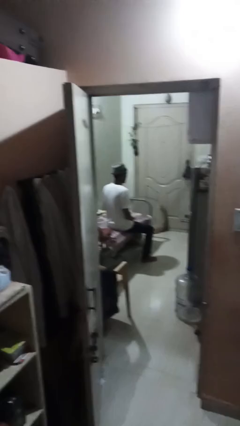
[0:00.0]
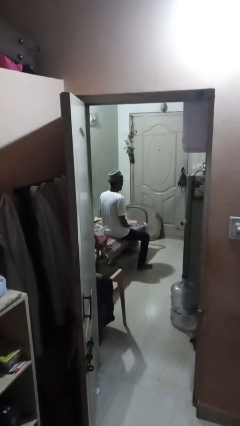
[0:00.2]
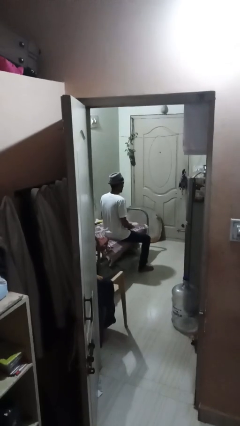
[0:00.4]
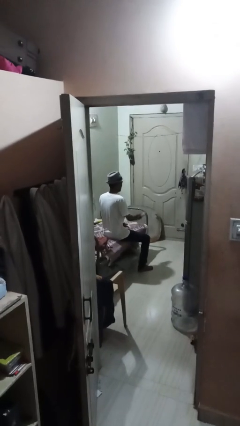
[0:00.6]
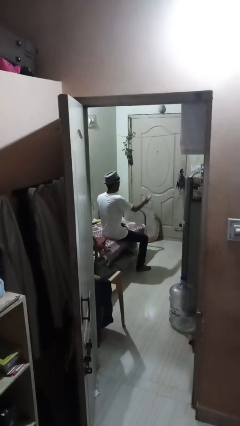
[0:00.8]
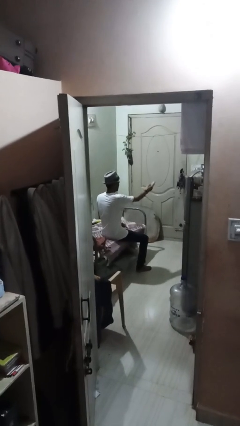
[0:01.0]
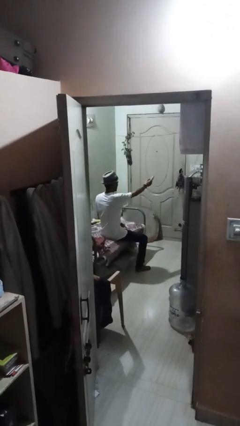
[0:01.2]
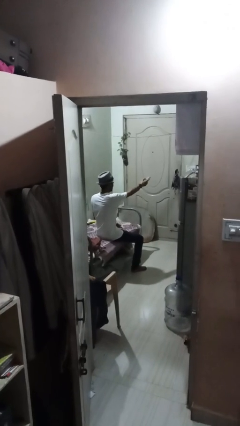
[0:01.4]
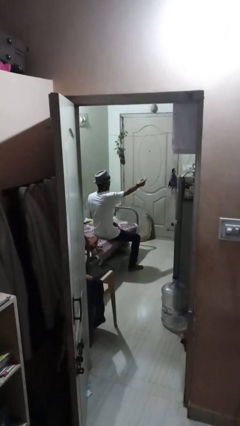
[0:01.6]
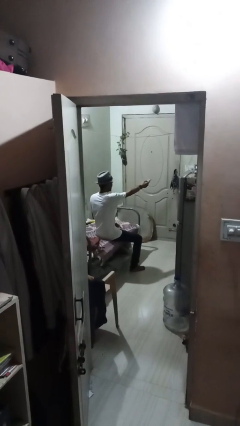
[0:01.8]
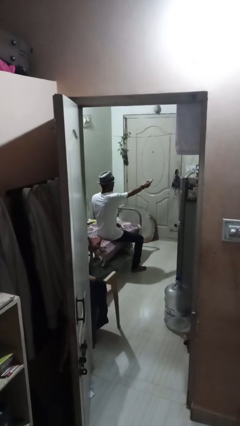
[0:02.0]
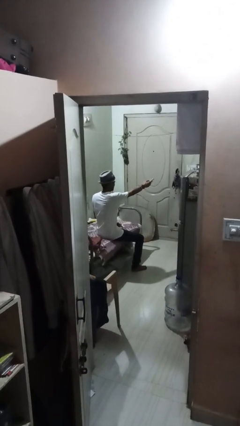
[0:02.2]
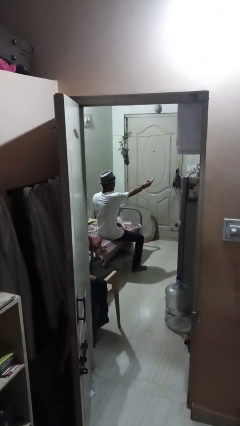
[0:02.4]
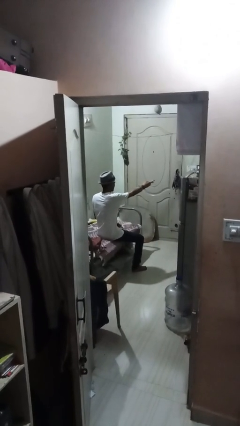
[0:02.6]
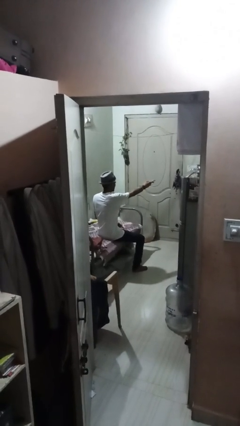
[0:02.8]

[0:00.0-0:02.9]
person uses television remote

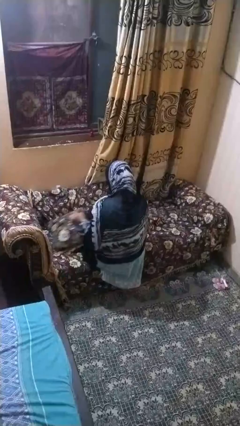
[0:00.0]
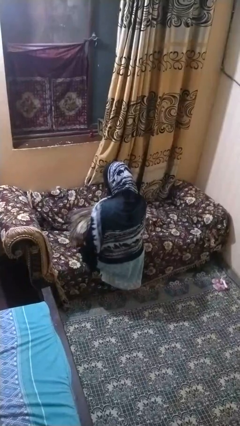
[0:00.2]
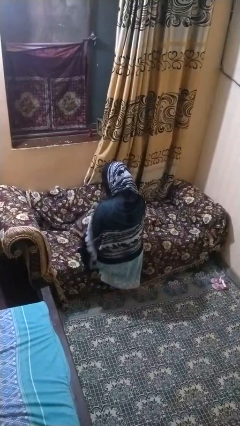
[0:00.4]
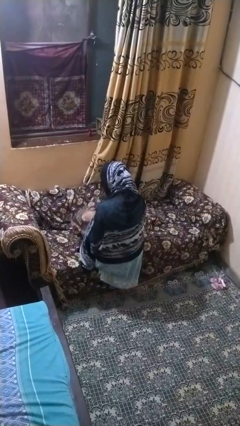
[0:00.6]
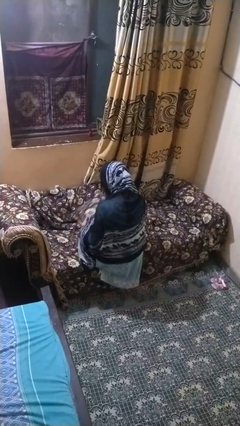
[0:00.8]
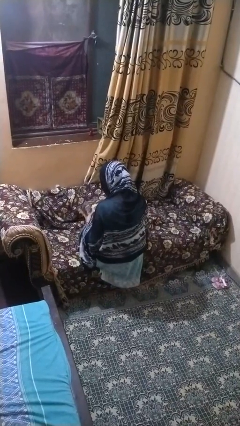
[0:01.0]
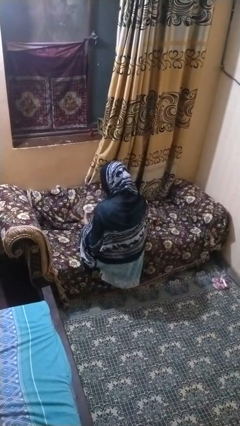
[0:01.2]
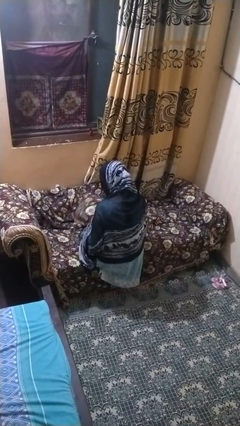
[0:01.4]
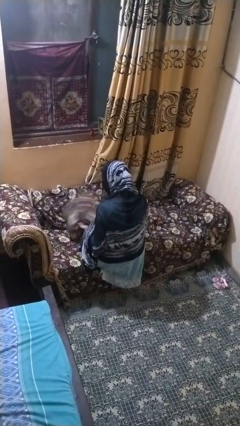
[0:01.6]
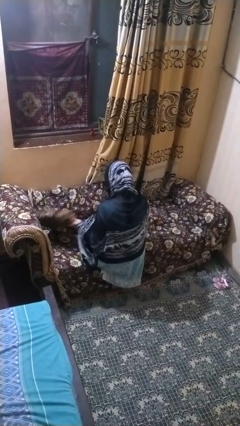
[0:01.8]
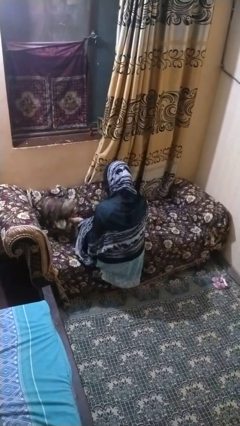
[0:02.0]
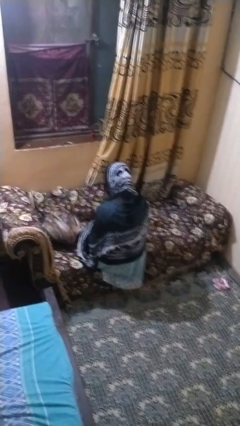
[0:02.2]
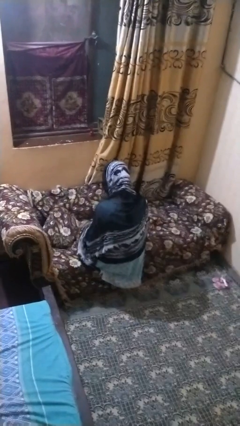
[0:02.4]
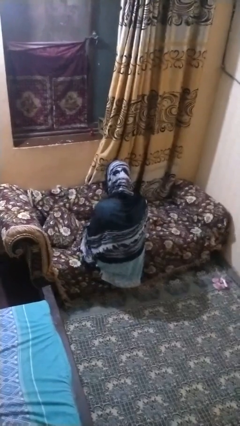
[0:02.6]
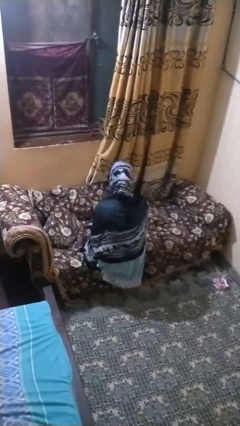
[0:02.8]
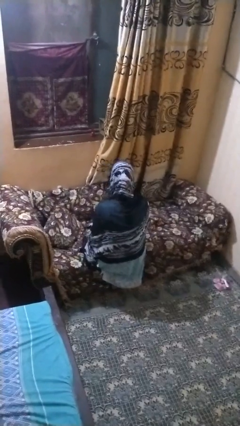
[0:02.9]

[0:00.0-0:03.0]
person searches in couch

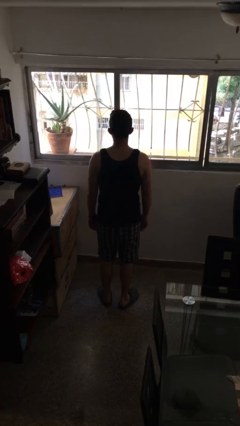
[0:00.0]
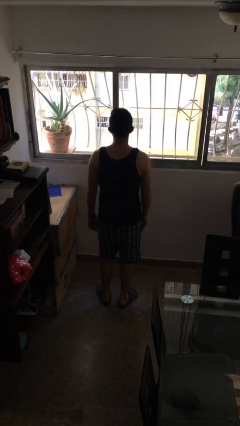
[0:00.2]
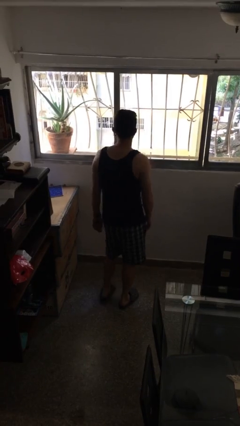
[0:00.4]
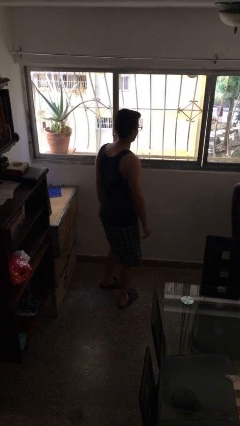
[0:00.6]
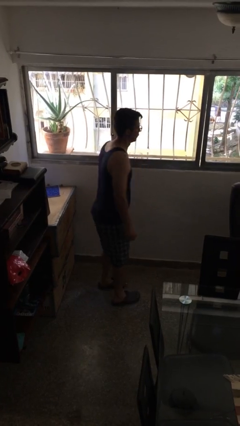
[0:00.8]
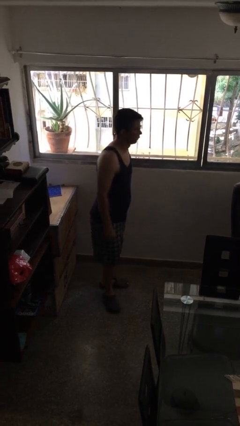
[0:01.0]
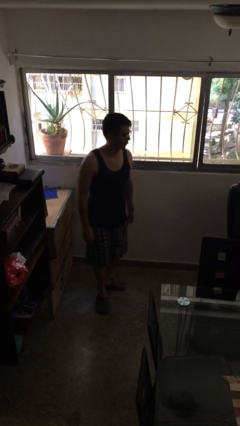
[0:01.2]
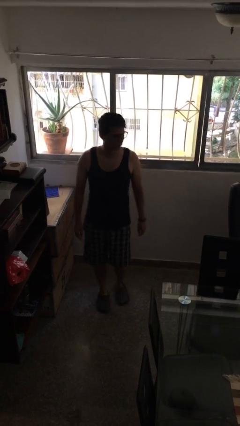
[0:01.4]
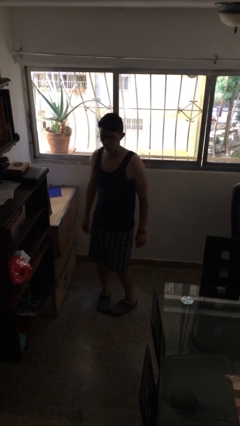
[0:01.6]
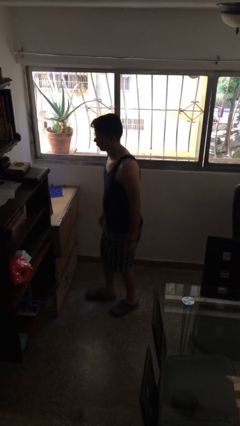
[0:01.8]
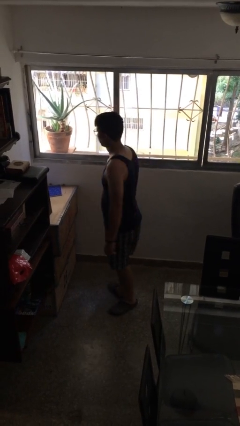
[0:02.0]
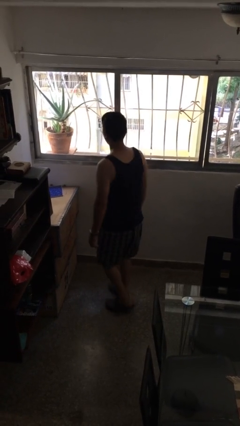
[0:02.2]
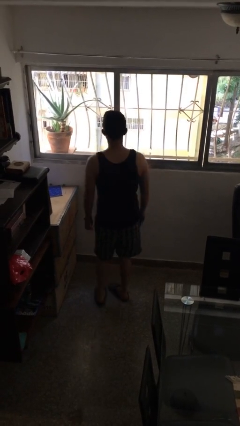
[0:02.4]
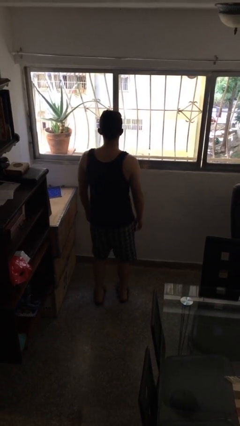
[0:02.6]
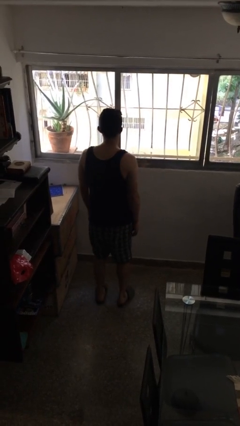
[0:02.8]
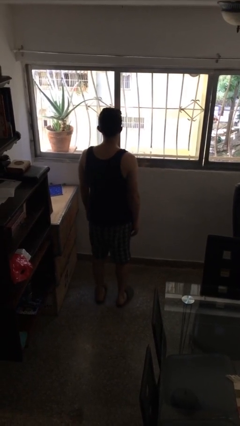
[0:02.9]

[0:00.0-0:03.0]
person twirls

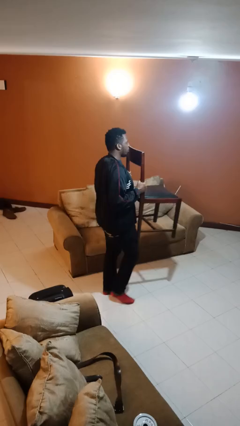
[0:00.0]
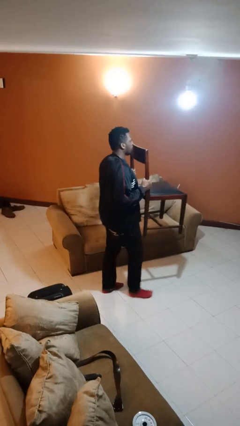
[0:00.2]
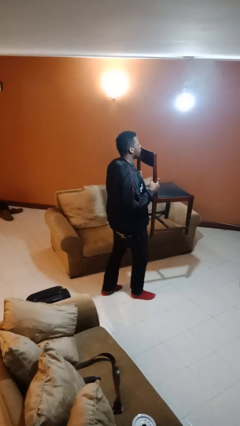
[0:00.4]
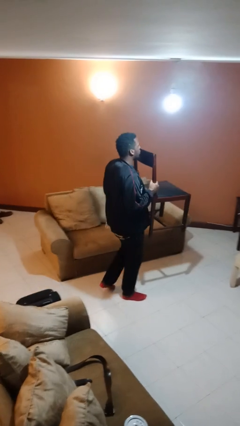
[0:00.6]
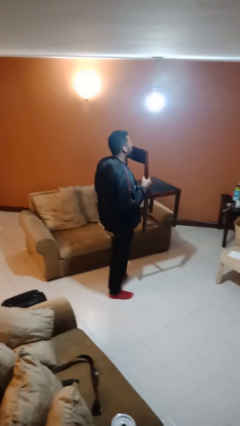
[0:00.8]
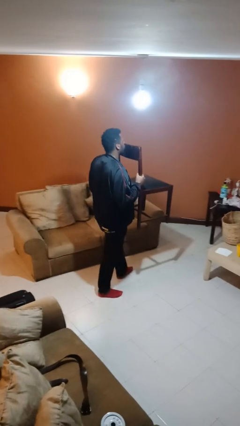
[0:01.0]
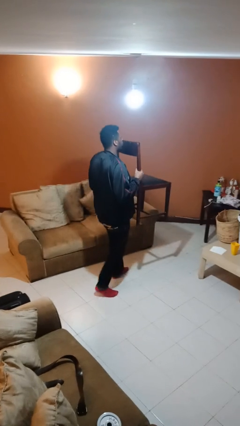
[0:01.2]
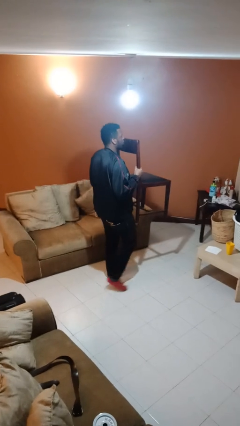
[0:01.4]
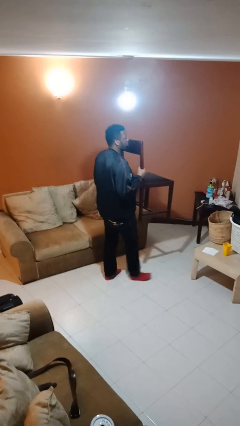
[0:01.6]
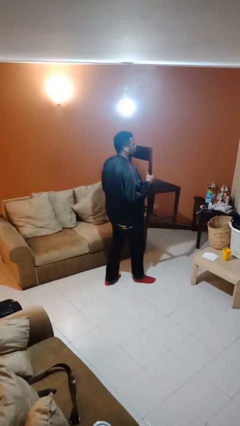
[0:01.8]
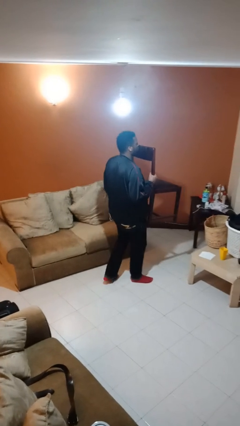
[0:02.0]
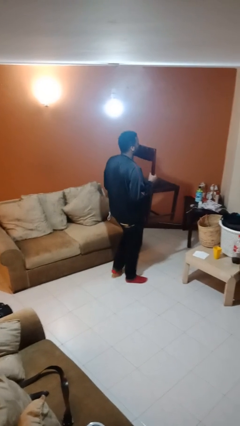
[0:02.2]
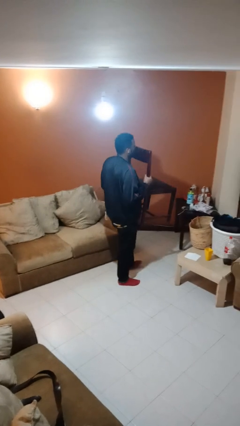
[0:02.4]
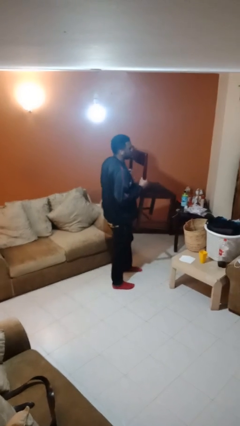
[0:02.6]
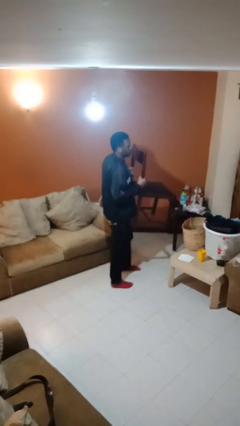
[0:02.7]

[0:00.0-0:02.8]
person carries furniture

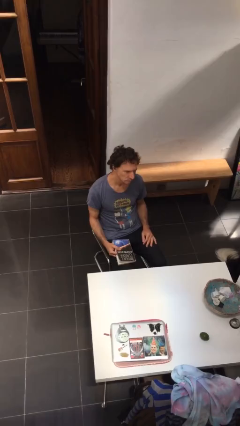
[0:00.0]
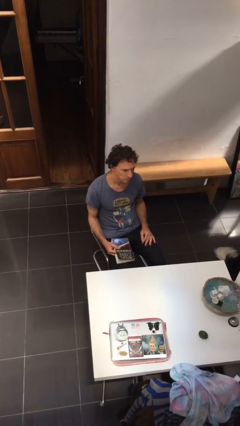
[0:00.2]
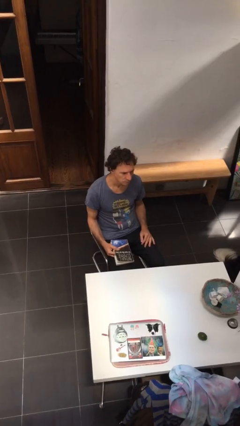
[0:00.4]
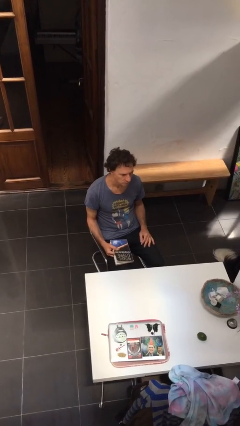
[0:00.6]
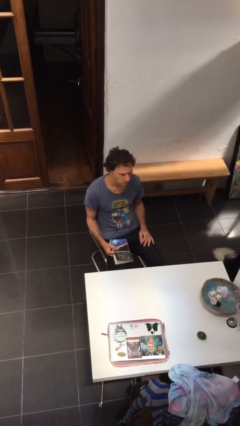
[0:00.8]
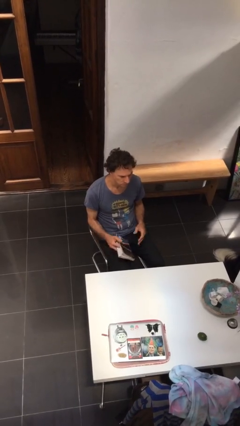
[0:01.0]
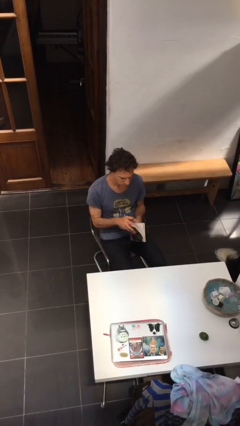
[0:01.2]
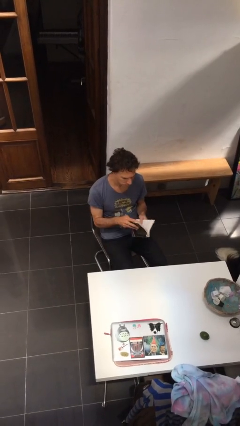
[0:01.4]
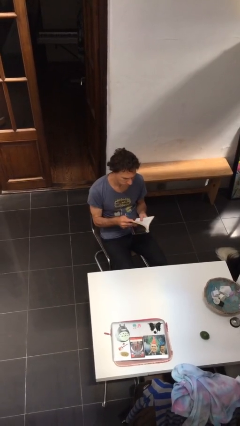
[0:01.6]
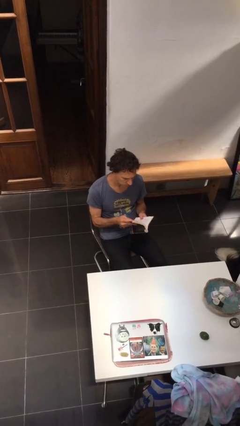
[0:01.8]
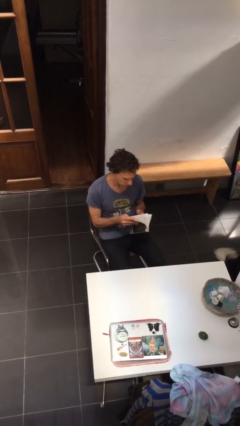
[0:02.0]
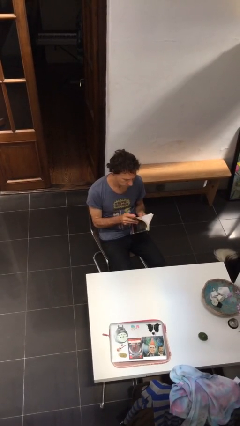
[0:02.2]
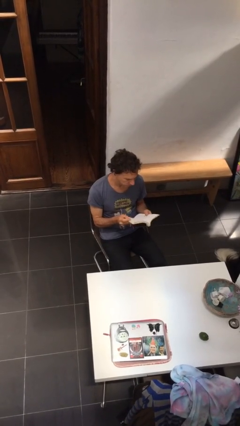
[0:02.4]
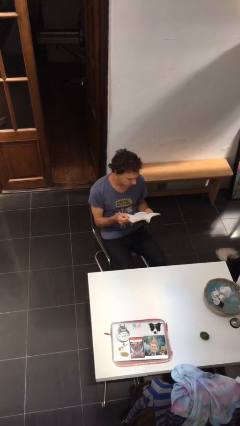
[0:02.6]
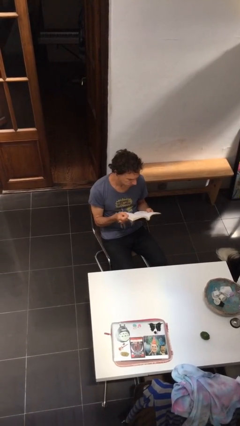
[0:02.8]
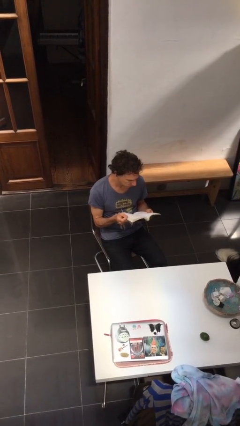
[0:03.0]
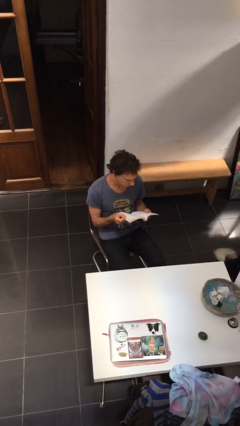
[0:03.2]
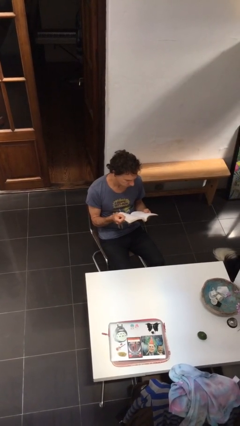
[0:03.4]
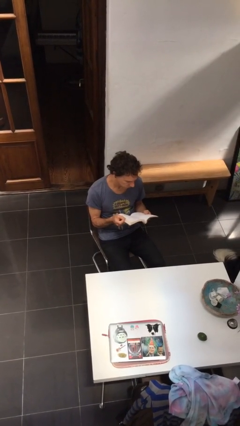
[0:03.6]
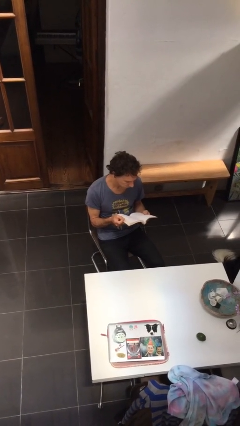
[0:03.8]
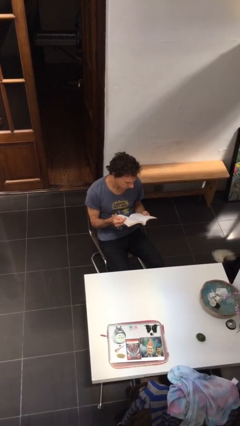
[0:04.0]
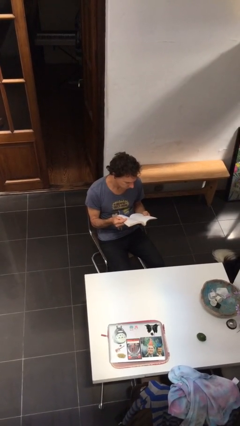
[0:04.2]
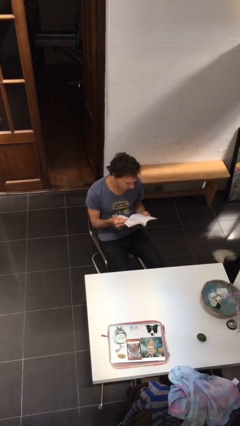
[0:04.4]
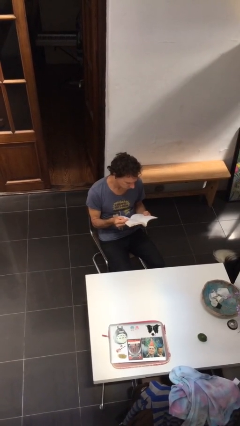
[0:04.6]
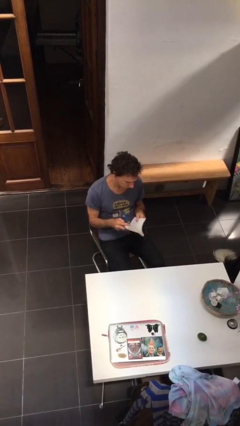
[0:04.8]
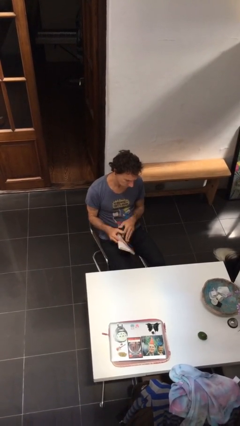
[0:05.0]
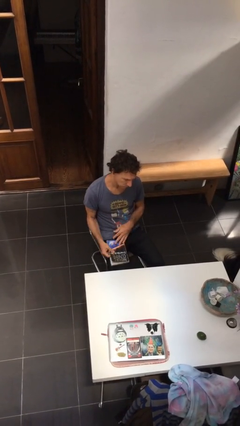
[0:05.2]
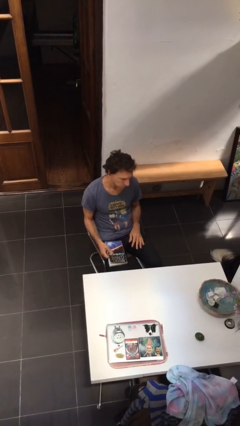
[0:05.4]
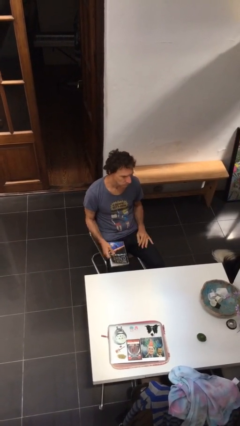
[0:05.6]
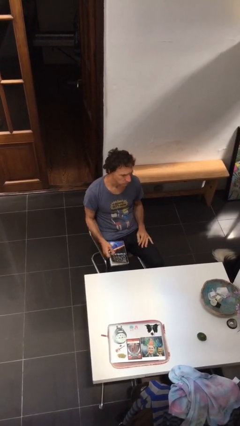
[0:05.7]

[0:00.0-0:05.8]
person reads document
